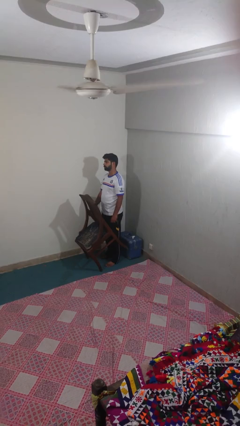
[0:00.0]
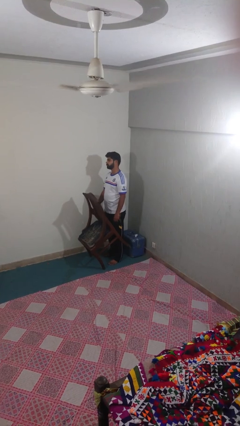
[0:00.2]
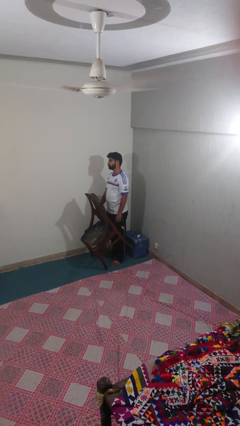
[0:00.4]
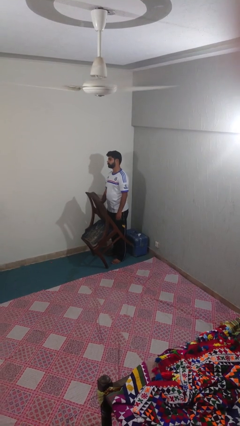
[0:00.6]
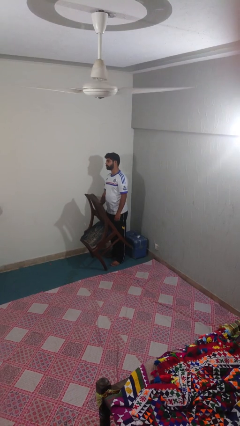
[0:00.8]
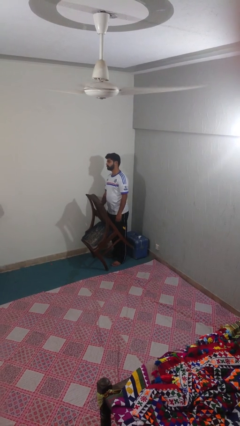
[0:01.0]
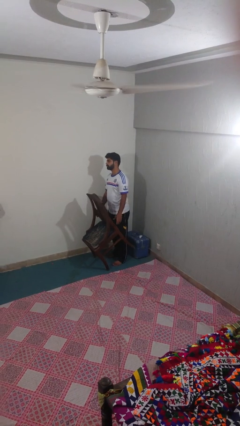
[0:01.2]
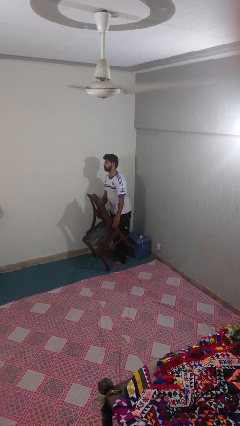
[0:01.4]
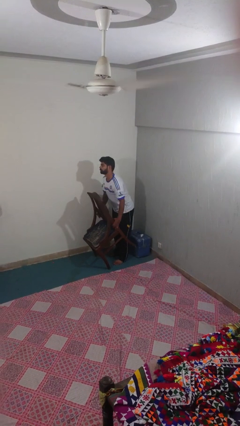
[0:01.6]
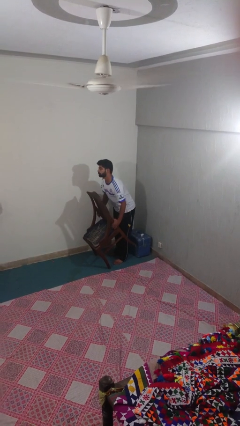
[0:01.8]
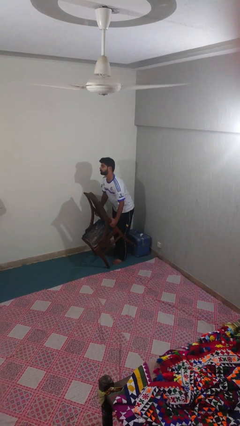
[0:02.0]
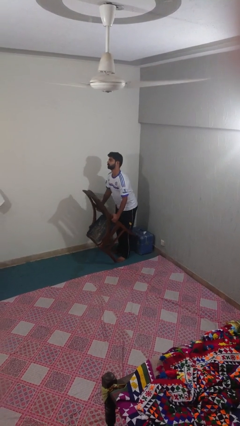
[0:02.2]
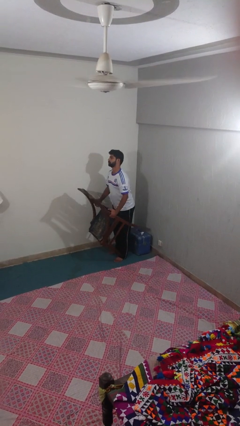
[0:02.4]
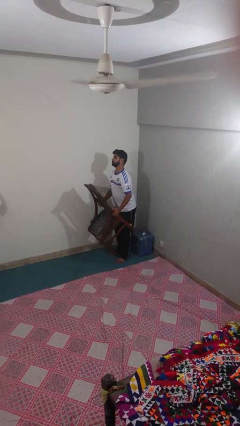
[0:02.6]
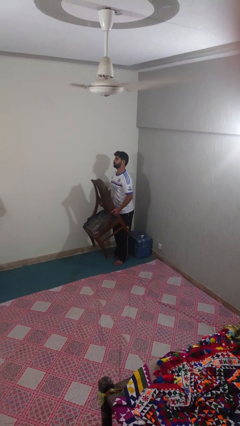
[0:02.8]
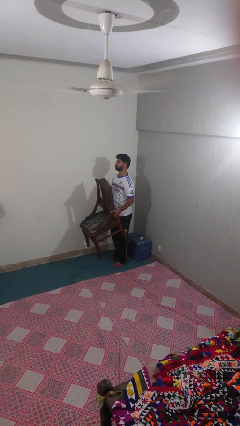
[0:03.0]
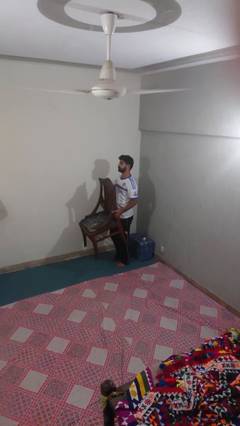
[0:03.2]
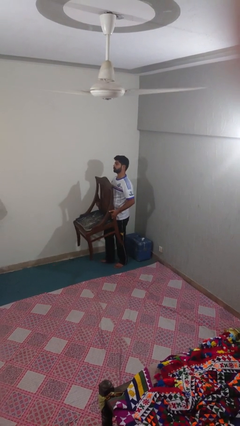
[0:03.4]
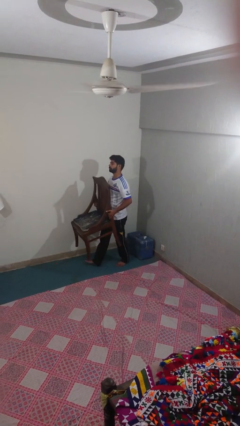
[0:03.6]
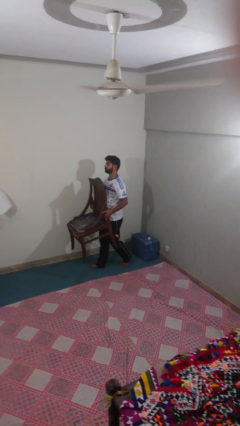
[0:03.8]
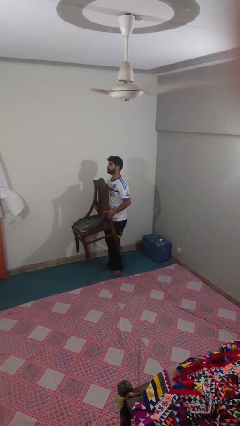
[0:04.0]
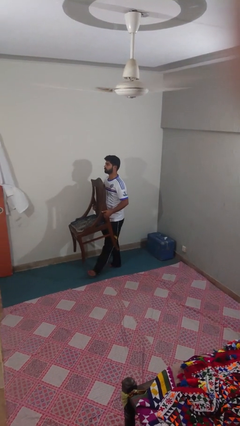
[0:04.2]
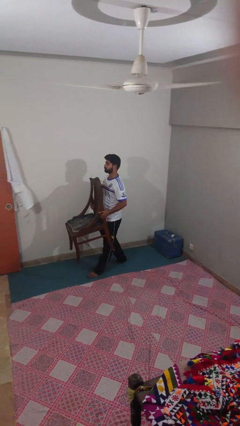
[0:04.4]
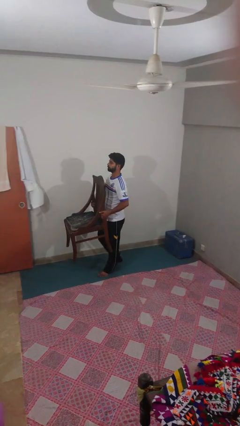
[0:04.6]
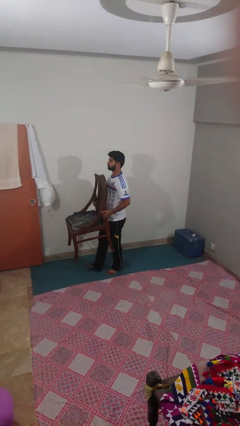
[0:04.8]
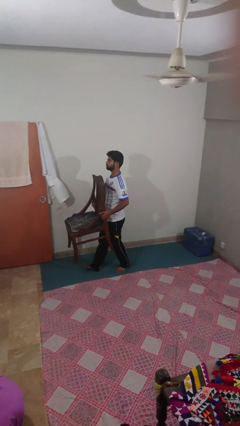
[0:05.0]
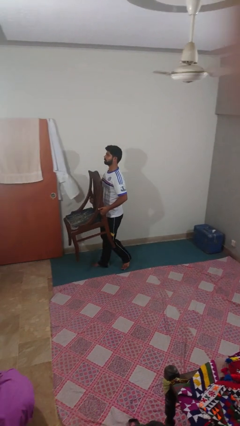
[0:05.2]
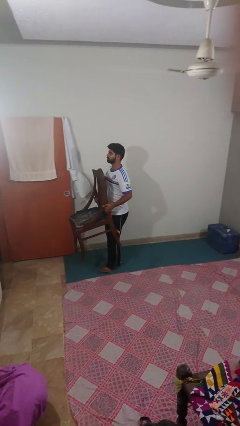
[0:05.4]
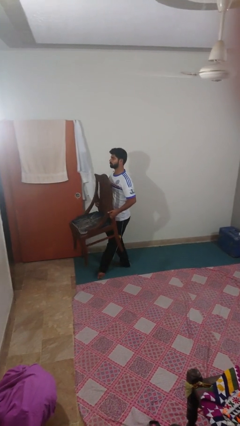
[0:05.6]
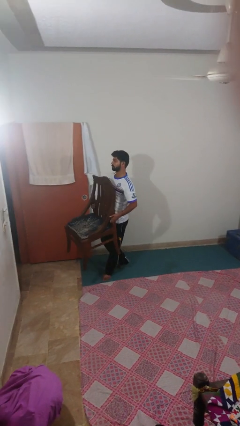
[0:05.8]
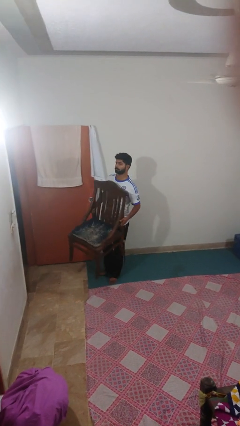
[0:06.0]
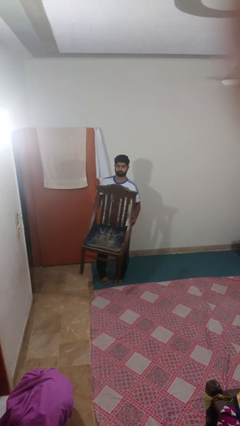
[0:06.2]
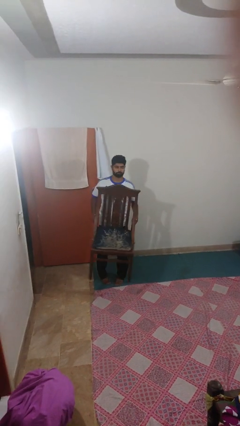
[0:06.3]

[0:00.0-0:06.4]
person carries furniture

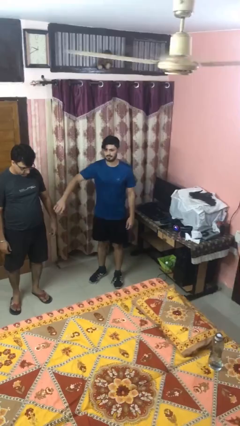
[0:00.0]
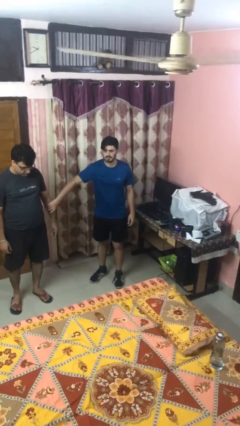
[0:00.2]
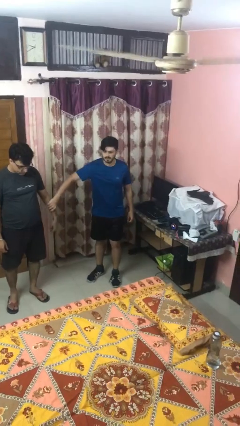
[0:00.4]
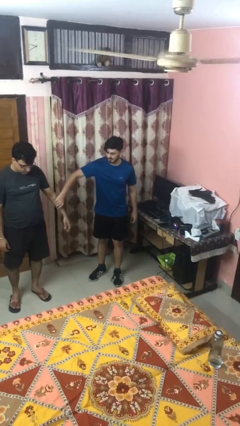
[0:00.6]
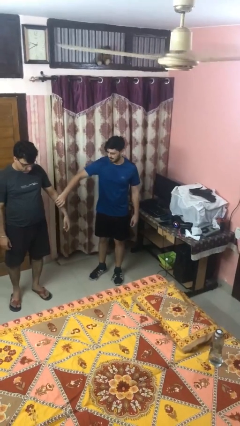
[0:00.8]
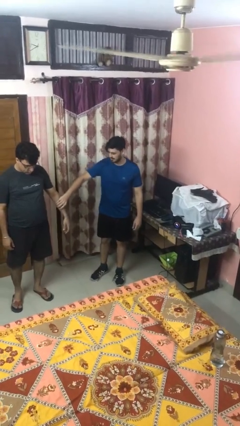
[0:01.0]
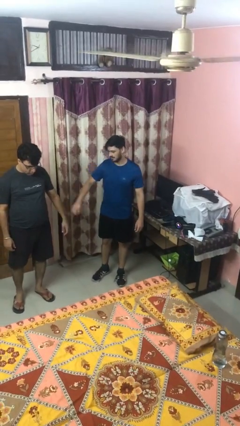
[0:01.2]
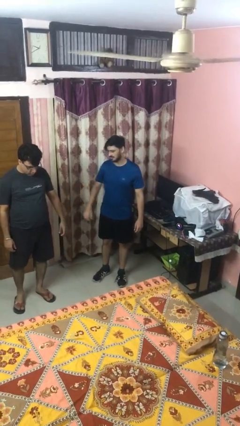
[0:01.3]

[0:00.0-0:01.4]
person grabs person by forearm

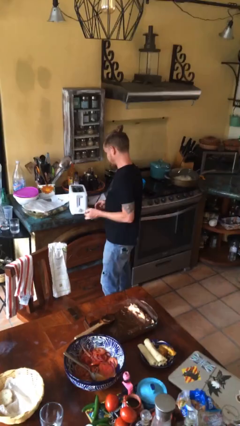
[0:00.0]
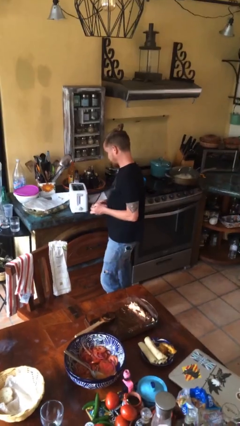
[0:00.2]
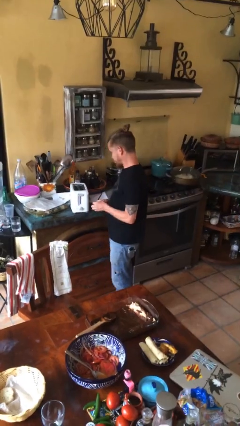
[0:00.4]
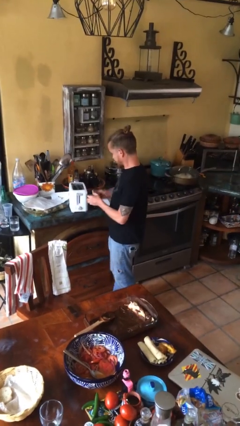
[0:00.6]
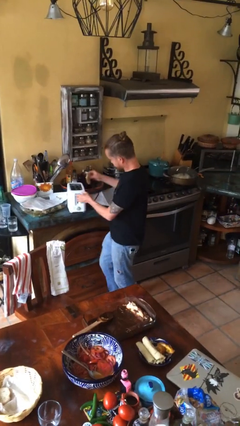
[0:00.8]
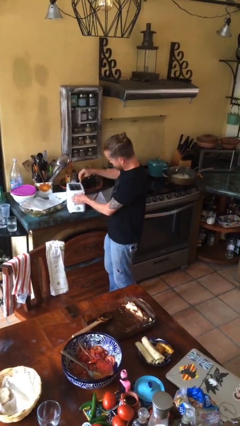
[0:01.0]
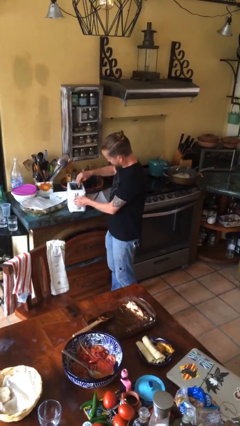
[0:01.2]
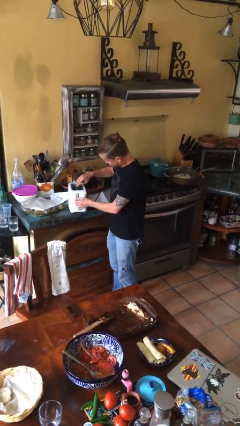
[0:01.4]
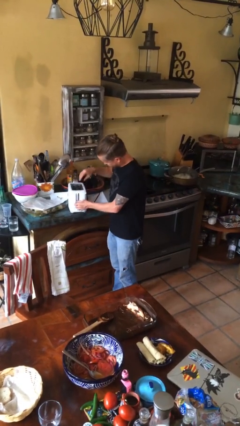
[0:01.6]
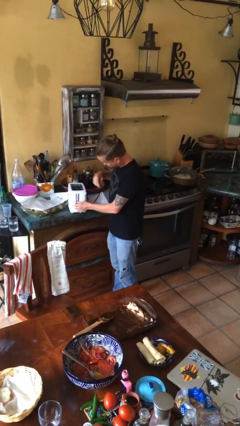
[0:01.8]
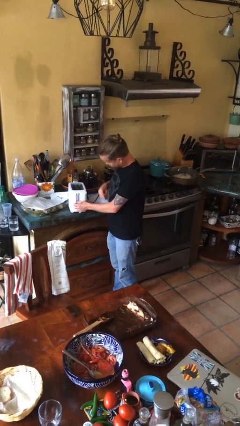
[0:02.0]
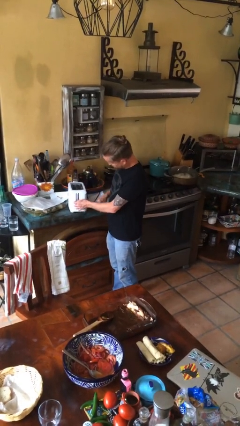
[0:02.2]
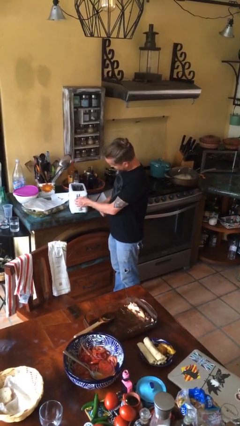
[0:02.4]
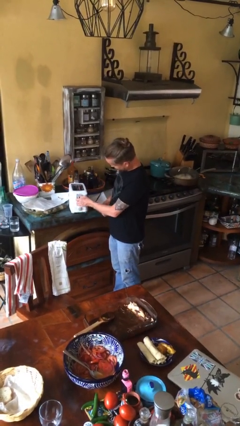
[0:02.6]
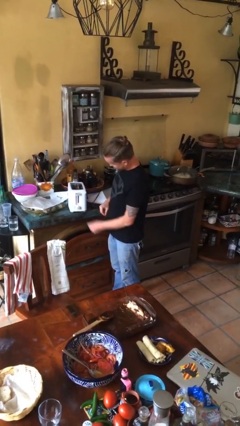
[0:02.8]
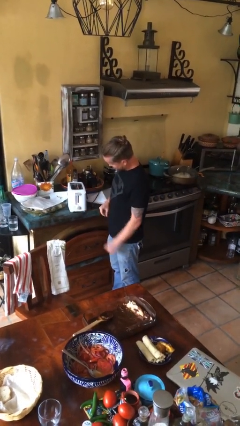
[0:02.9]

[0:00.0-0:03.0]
person puts object into toaster

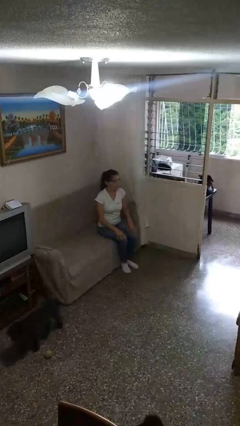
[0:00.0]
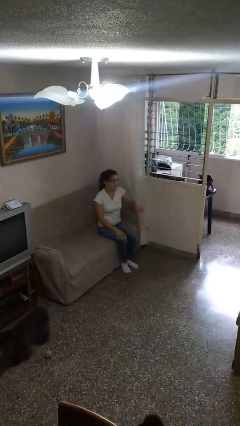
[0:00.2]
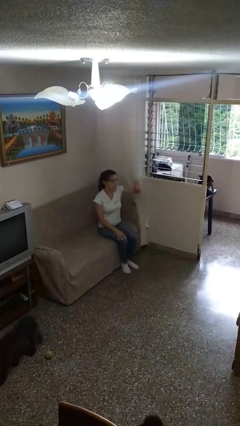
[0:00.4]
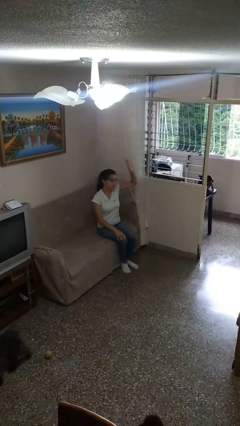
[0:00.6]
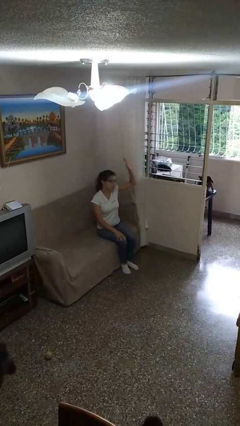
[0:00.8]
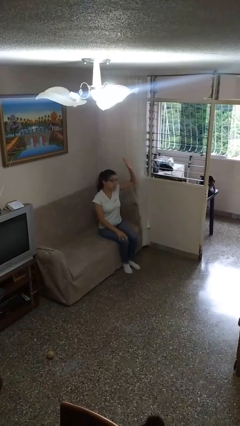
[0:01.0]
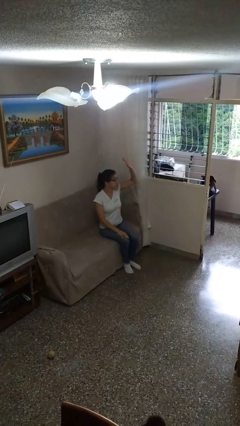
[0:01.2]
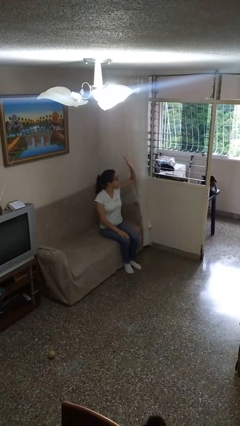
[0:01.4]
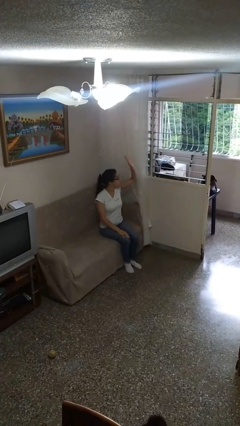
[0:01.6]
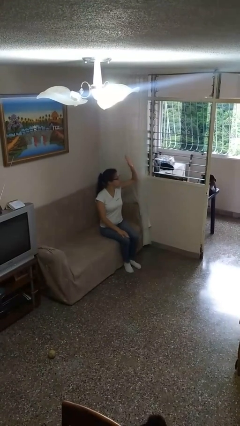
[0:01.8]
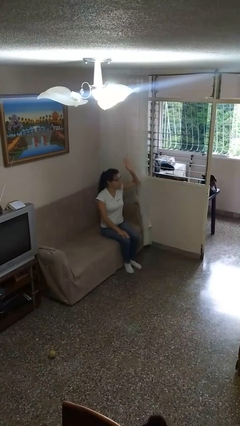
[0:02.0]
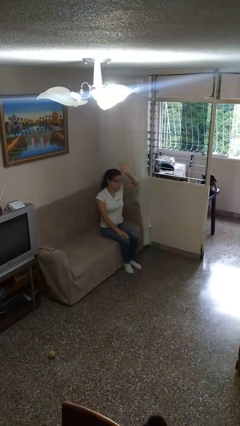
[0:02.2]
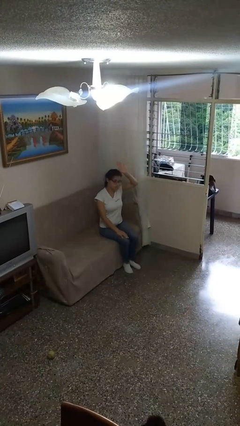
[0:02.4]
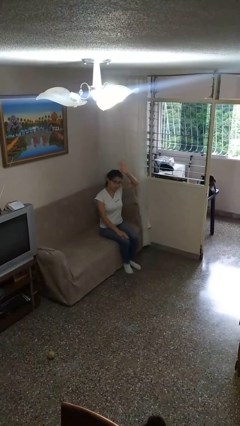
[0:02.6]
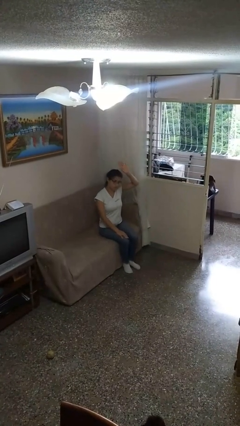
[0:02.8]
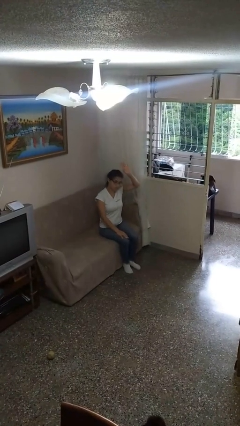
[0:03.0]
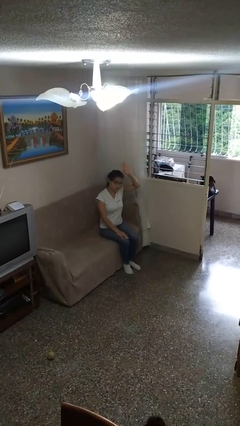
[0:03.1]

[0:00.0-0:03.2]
person gestures raise hand

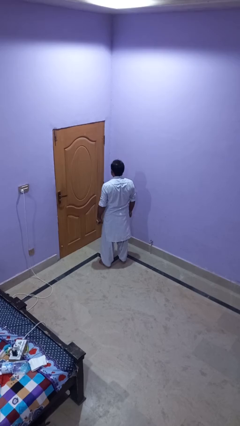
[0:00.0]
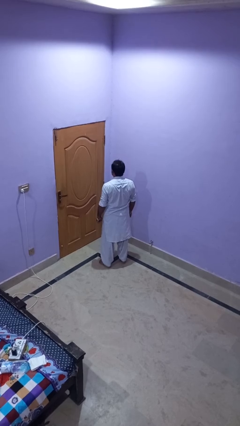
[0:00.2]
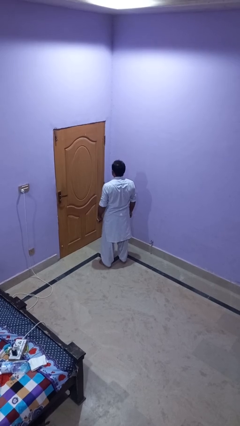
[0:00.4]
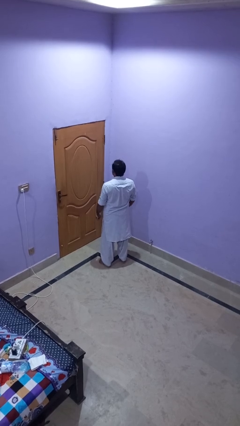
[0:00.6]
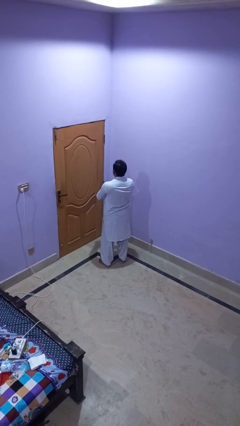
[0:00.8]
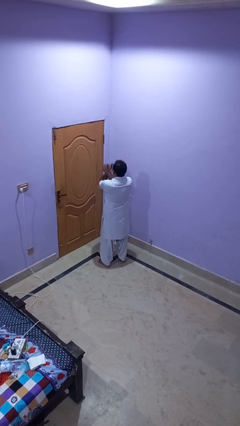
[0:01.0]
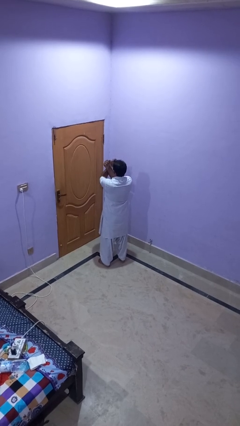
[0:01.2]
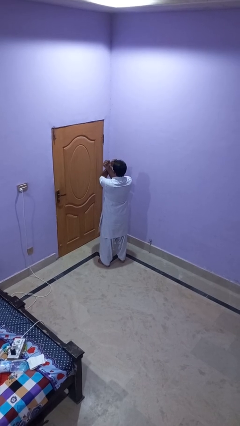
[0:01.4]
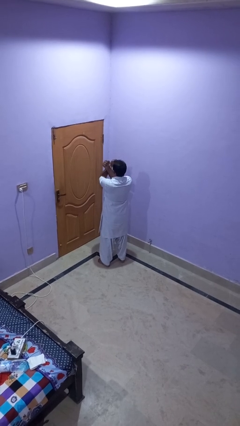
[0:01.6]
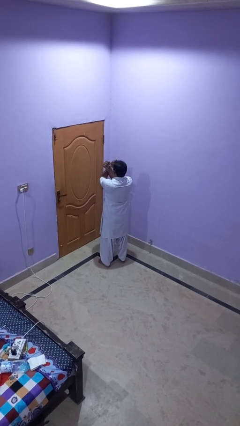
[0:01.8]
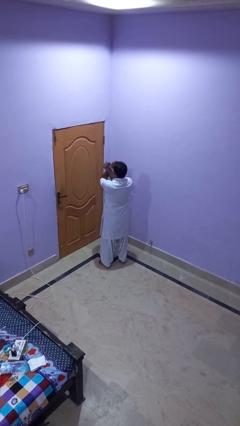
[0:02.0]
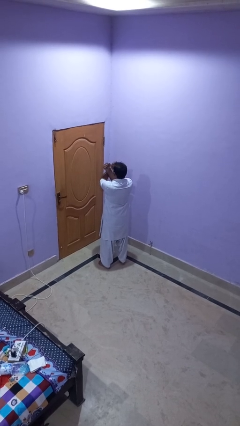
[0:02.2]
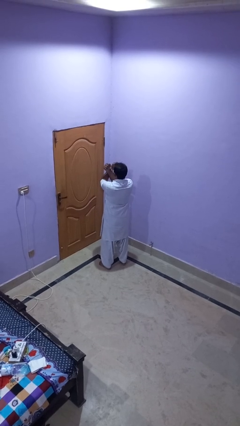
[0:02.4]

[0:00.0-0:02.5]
person crosses arms

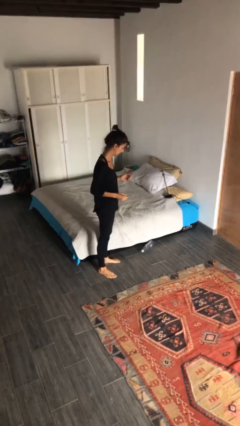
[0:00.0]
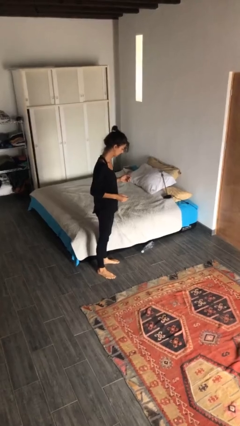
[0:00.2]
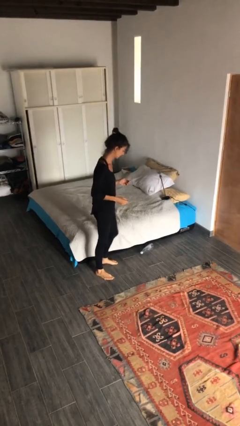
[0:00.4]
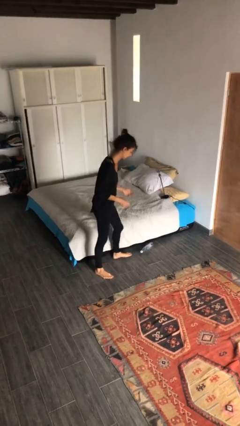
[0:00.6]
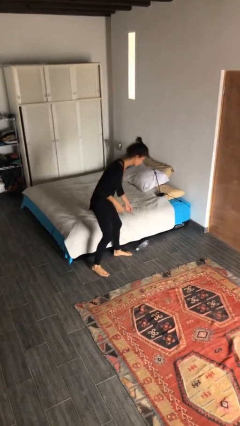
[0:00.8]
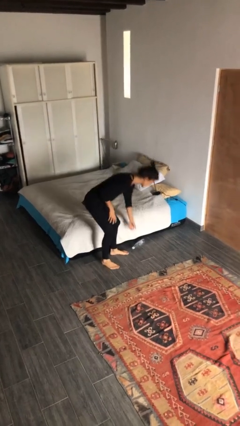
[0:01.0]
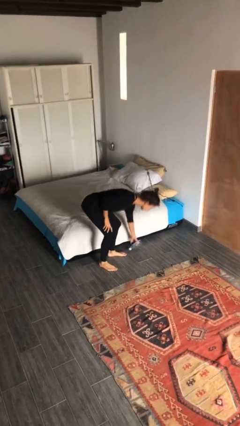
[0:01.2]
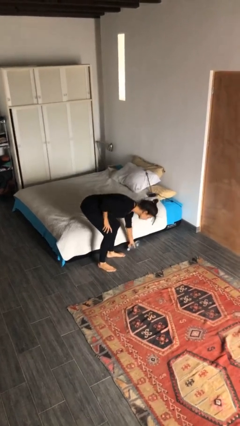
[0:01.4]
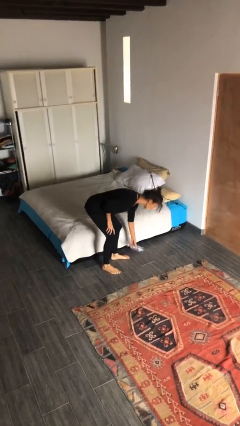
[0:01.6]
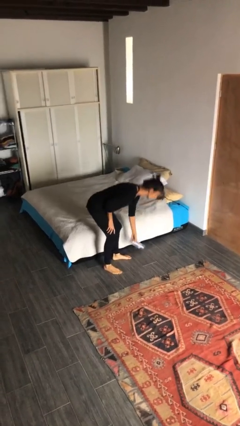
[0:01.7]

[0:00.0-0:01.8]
person picks up object from floor
